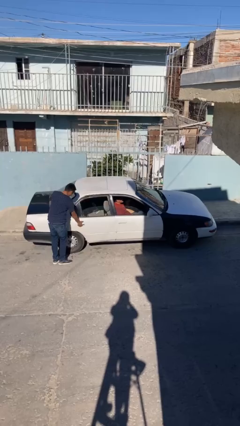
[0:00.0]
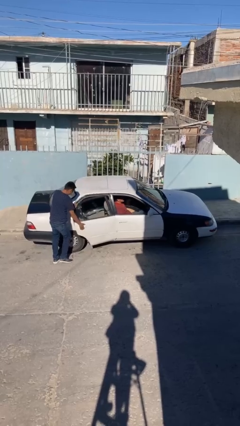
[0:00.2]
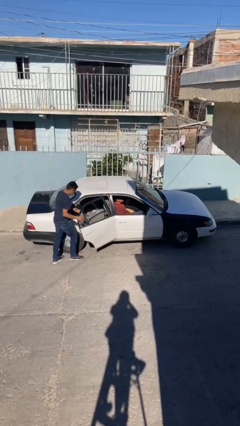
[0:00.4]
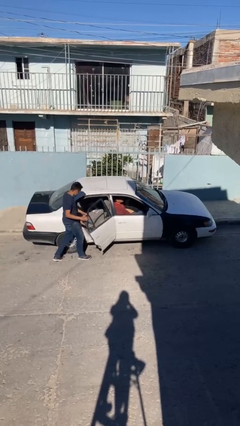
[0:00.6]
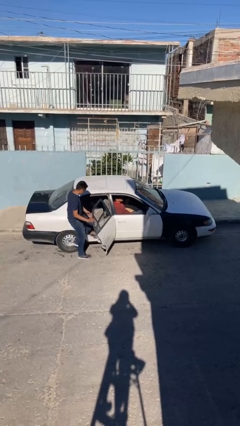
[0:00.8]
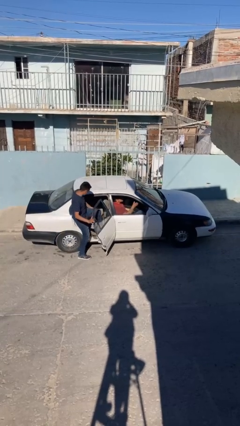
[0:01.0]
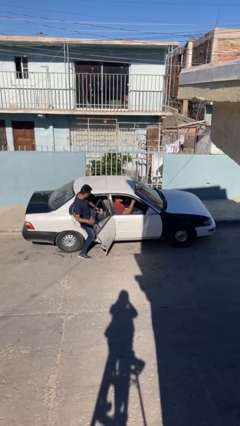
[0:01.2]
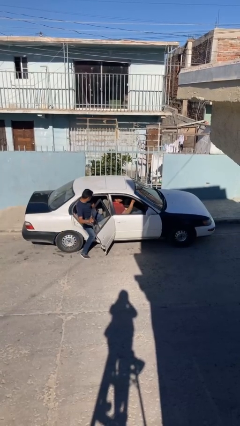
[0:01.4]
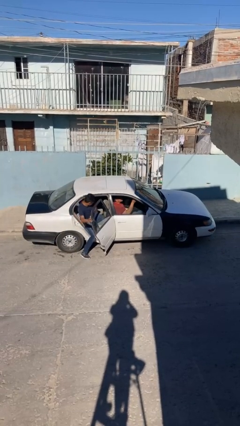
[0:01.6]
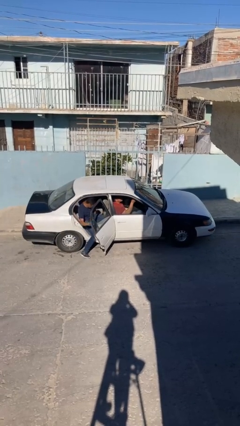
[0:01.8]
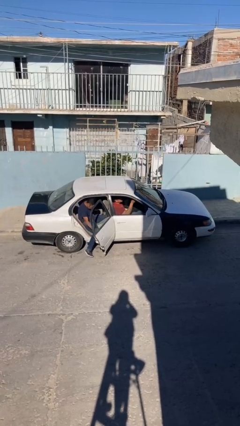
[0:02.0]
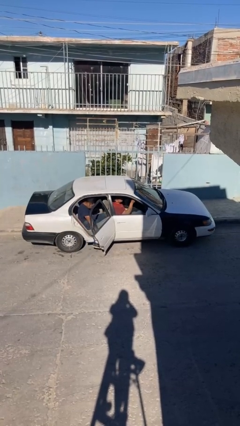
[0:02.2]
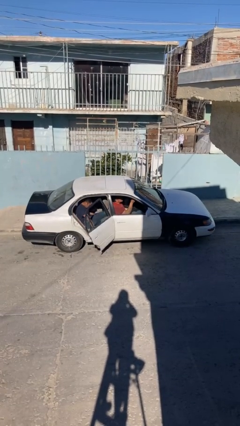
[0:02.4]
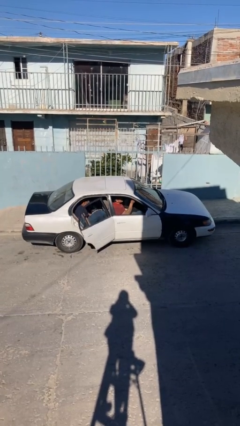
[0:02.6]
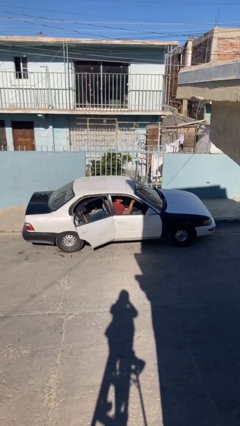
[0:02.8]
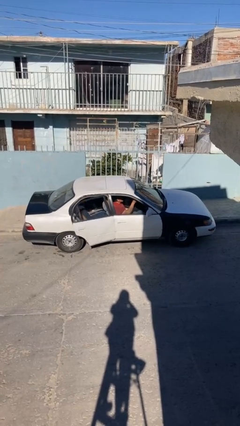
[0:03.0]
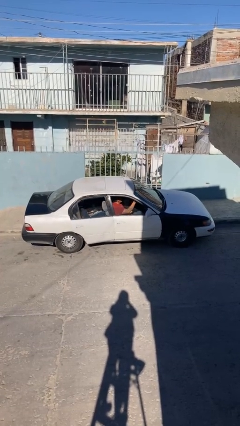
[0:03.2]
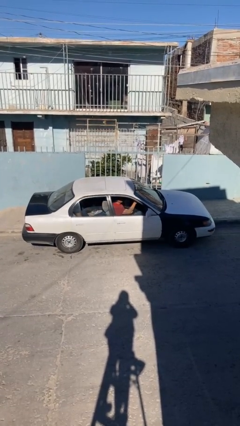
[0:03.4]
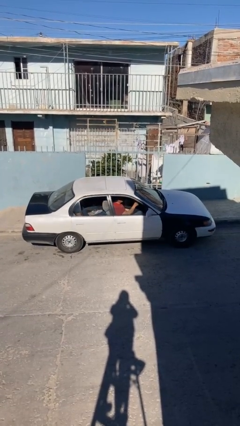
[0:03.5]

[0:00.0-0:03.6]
car picks up person

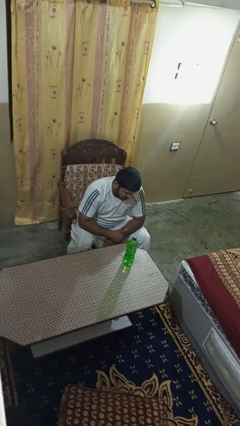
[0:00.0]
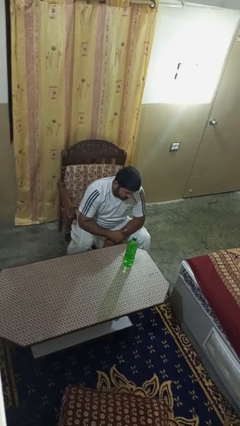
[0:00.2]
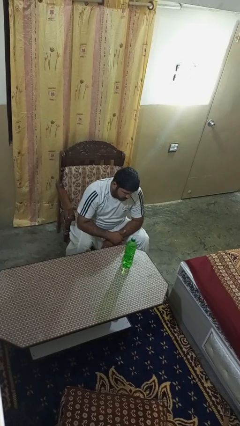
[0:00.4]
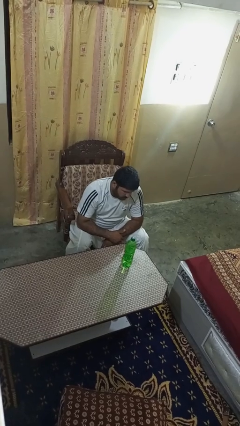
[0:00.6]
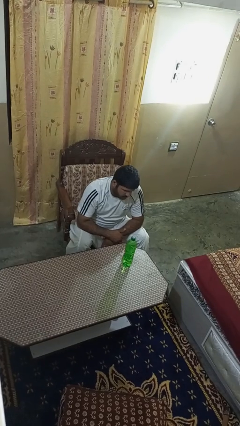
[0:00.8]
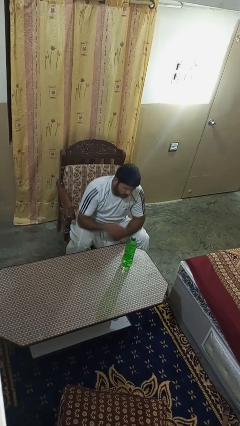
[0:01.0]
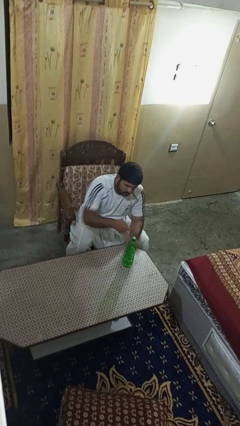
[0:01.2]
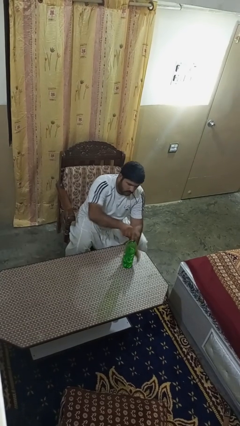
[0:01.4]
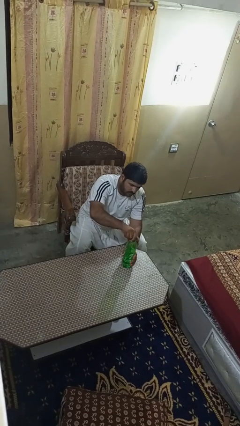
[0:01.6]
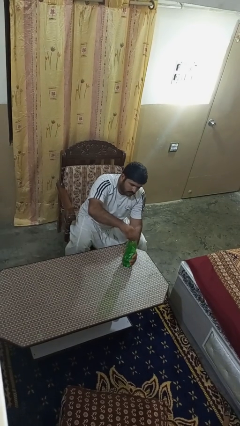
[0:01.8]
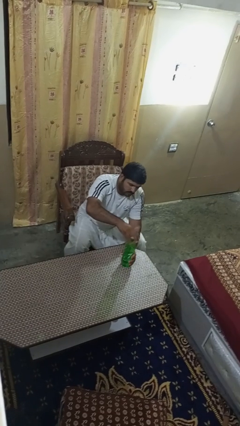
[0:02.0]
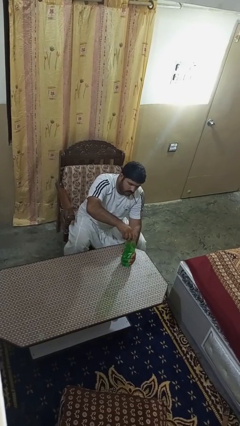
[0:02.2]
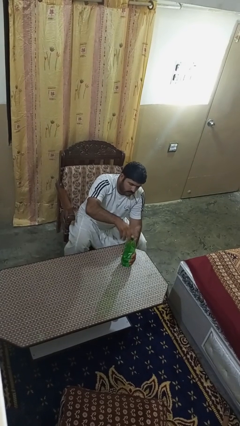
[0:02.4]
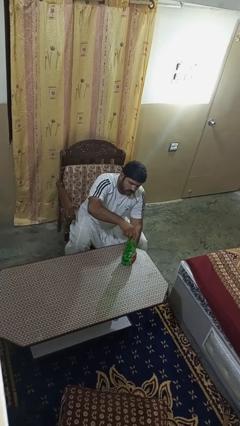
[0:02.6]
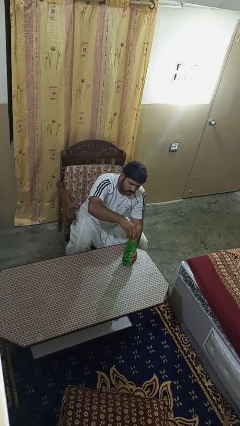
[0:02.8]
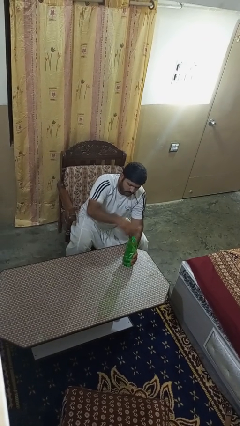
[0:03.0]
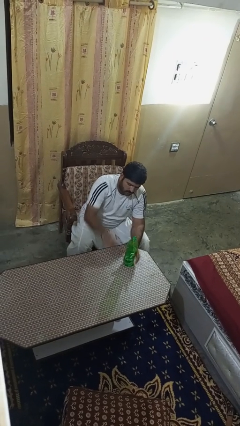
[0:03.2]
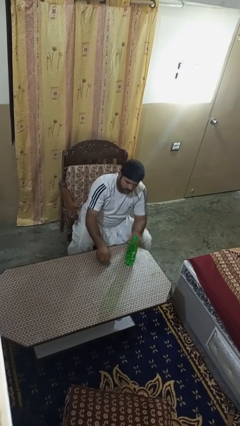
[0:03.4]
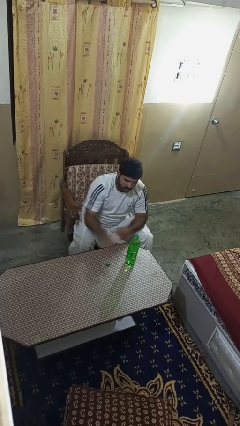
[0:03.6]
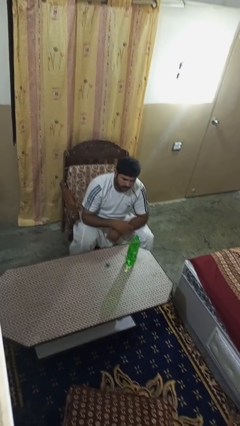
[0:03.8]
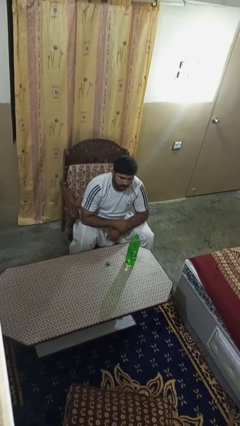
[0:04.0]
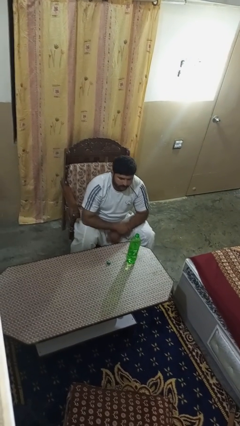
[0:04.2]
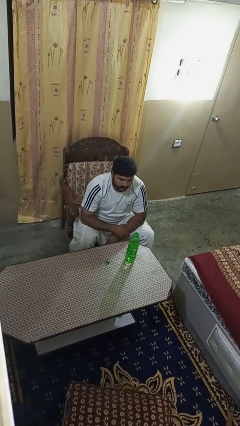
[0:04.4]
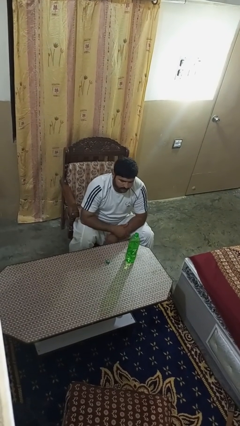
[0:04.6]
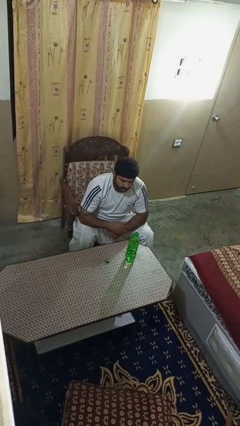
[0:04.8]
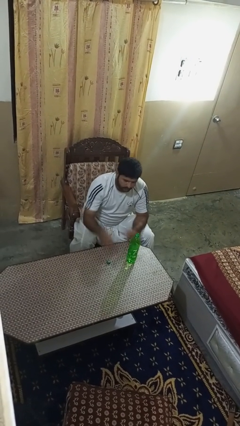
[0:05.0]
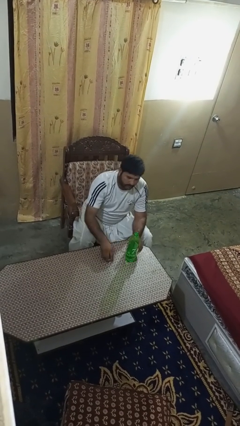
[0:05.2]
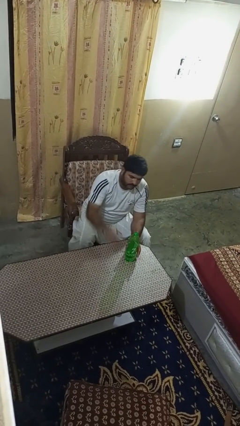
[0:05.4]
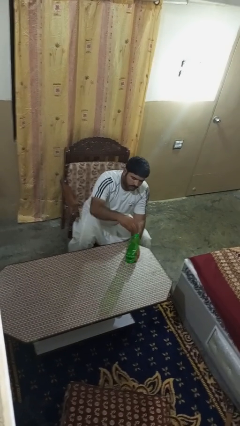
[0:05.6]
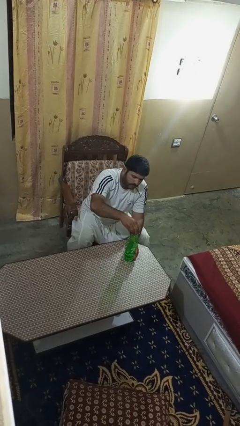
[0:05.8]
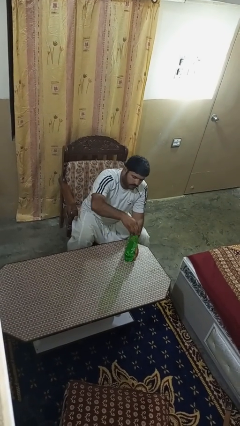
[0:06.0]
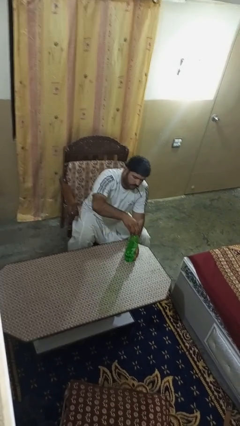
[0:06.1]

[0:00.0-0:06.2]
person unscrews lid from bottle

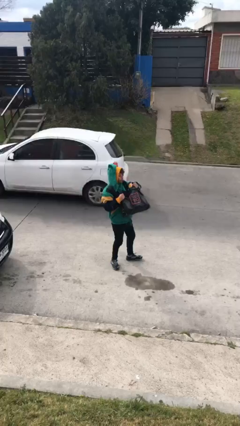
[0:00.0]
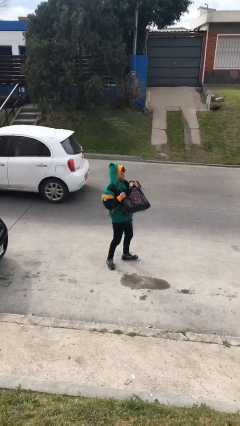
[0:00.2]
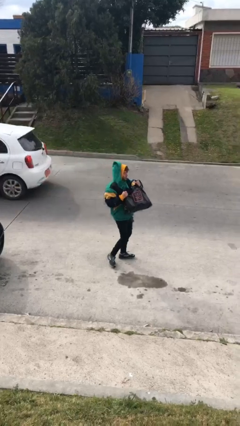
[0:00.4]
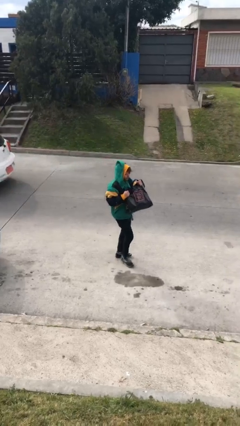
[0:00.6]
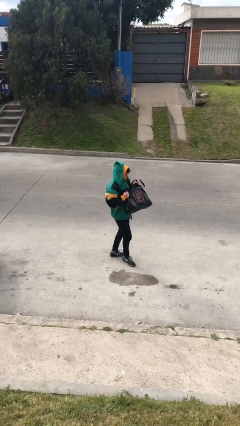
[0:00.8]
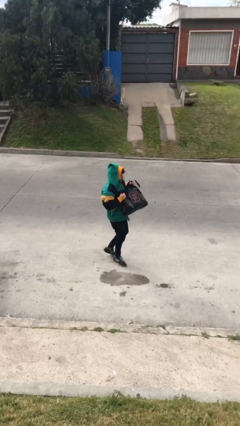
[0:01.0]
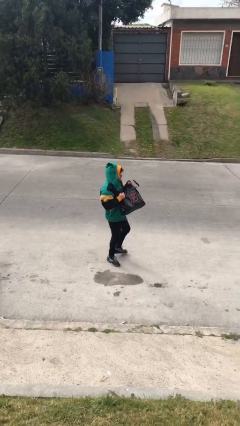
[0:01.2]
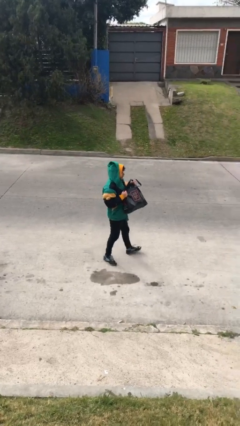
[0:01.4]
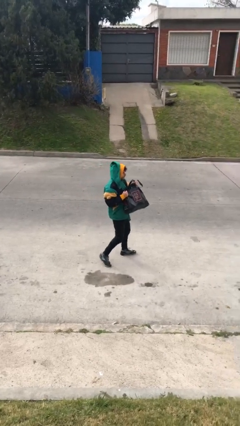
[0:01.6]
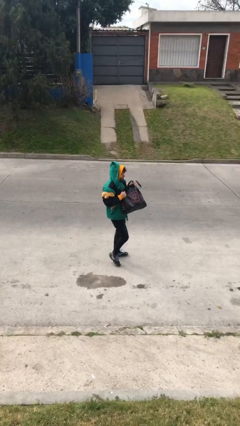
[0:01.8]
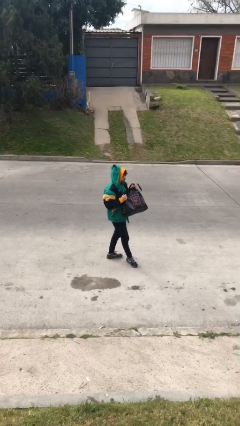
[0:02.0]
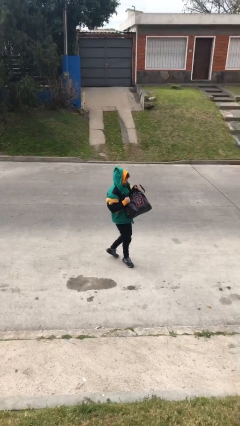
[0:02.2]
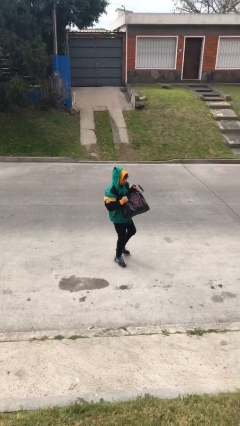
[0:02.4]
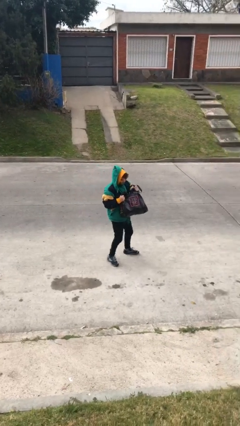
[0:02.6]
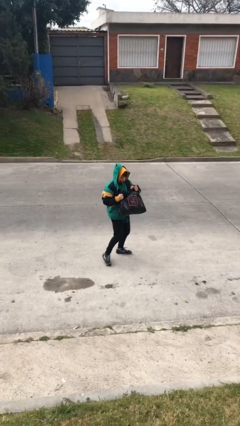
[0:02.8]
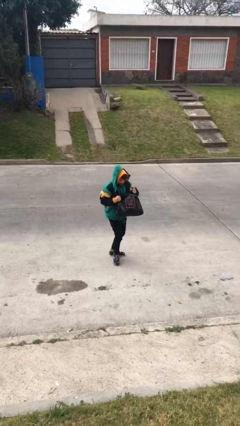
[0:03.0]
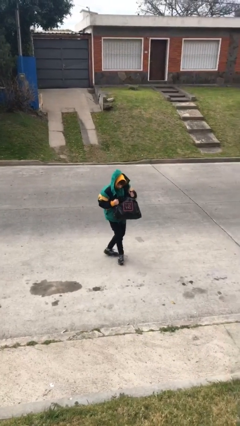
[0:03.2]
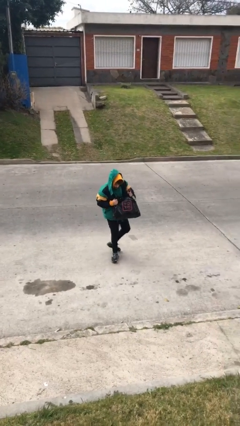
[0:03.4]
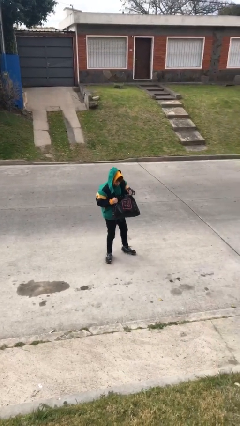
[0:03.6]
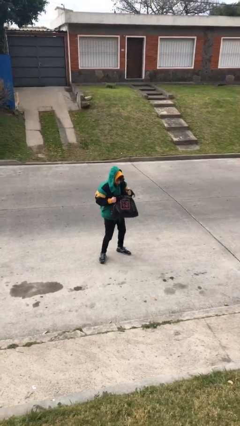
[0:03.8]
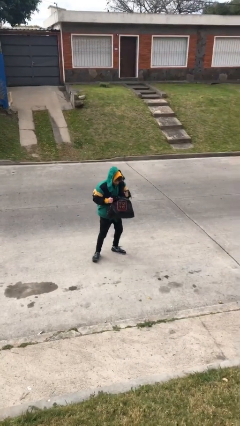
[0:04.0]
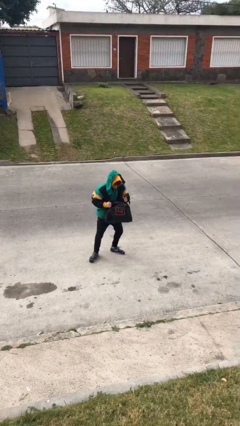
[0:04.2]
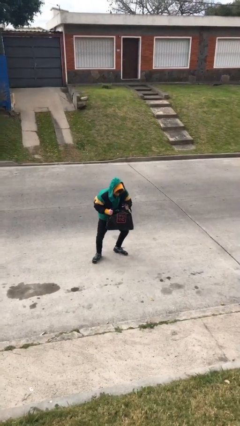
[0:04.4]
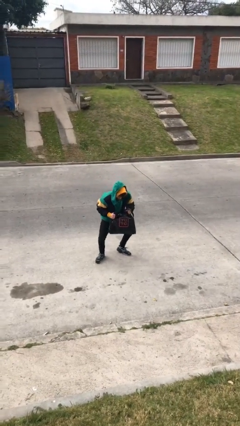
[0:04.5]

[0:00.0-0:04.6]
person carries heavy object

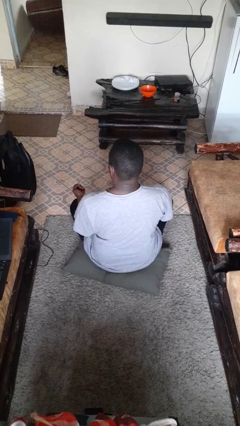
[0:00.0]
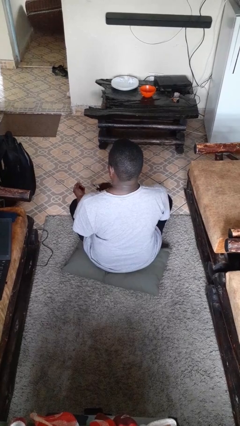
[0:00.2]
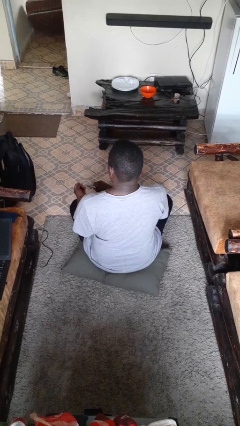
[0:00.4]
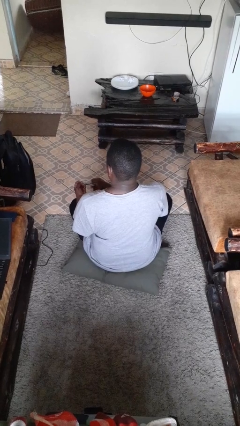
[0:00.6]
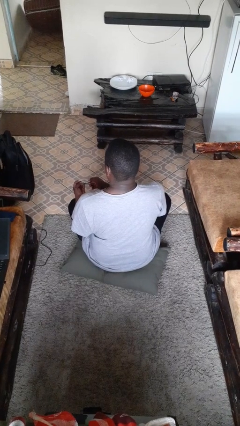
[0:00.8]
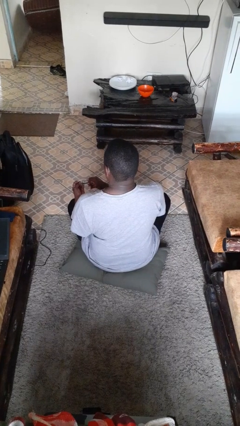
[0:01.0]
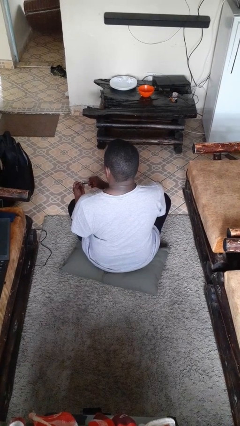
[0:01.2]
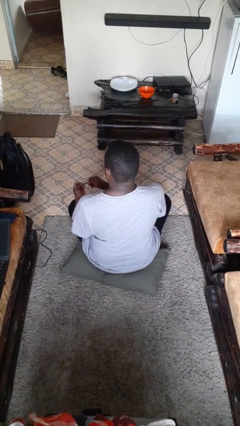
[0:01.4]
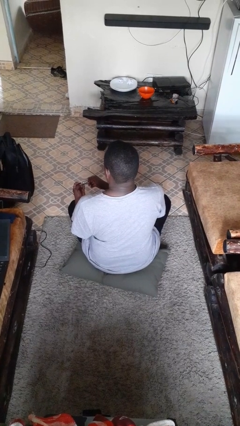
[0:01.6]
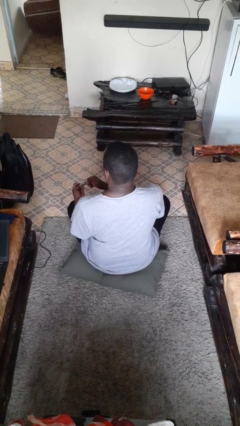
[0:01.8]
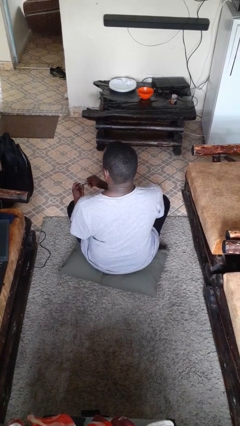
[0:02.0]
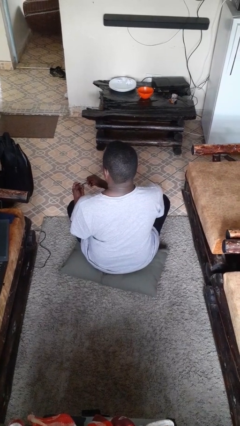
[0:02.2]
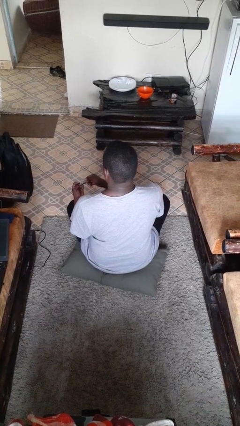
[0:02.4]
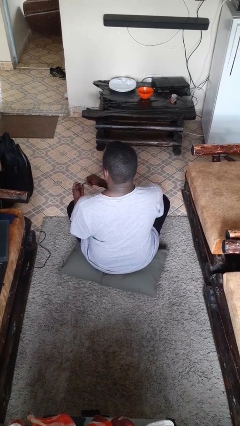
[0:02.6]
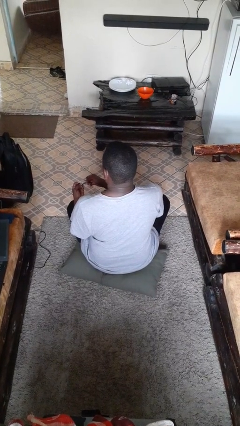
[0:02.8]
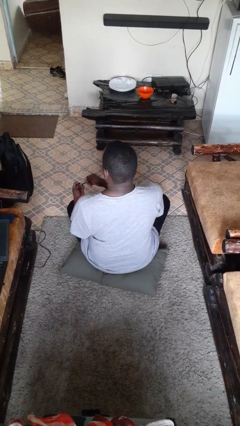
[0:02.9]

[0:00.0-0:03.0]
person clips fingernails

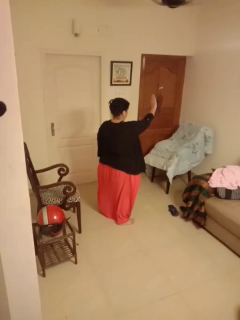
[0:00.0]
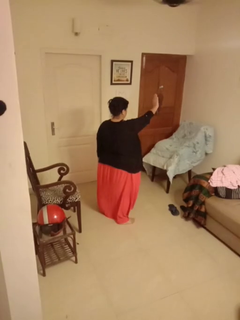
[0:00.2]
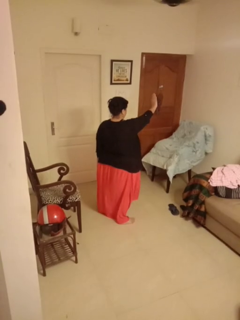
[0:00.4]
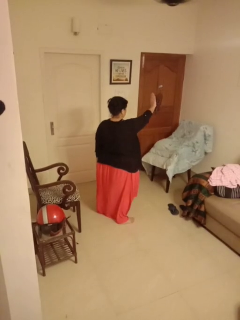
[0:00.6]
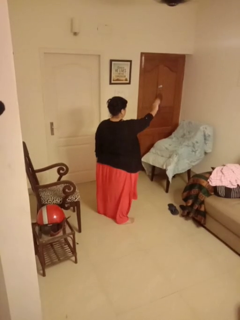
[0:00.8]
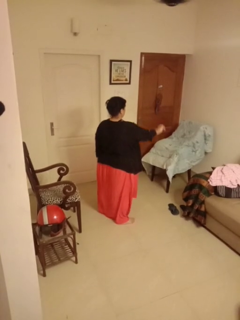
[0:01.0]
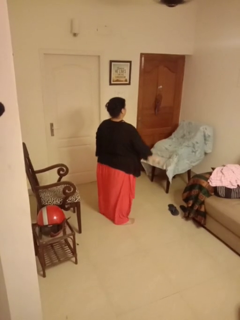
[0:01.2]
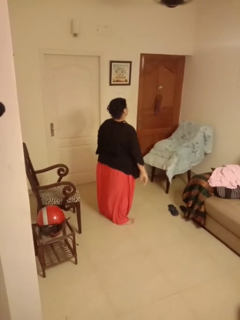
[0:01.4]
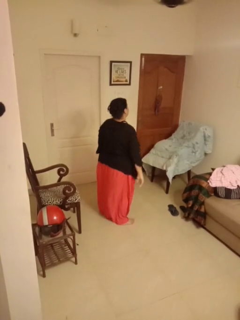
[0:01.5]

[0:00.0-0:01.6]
person gestures stop
